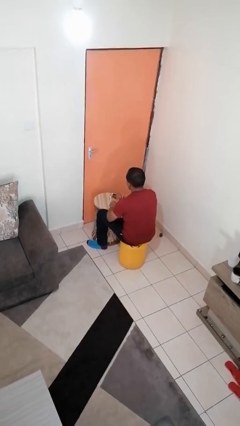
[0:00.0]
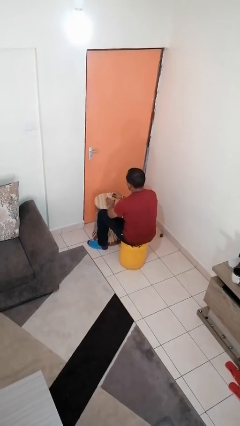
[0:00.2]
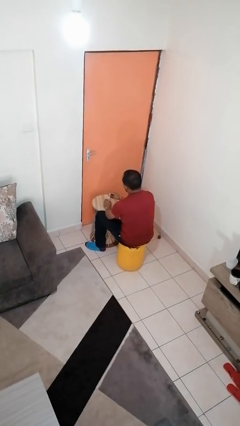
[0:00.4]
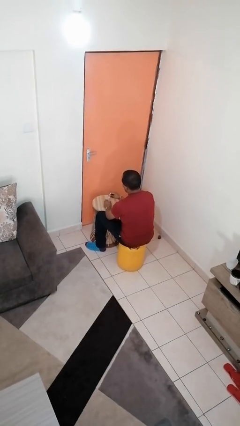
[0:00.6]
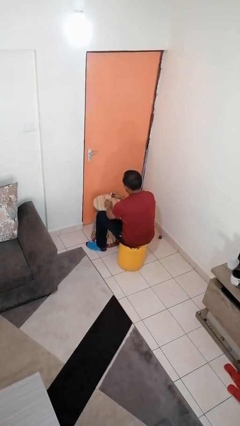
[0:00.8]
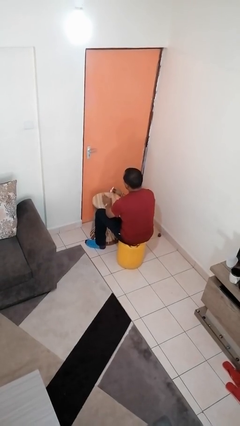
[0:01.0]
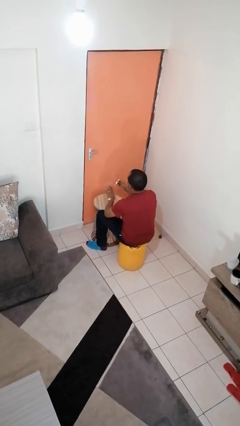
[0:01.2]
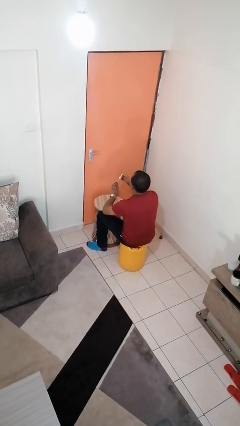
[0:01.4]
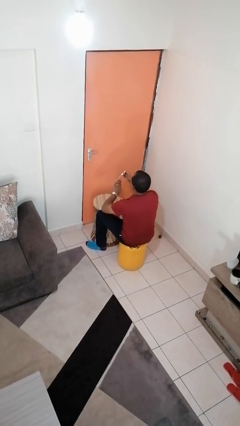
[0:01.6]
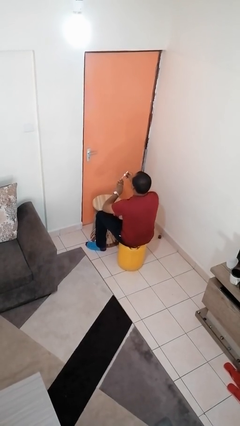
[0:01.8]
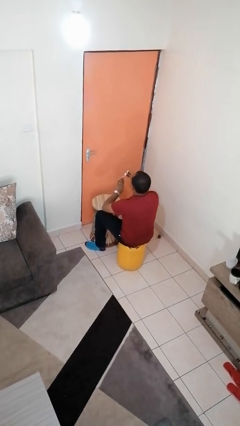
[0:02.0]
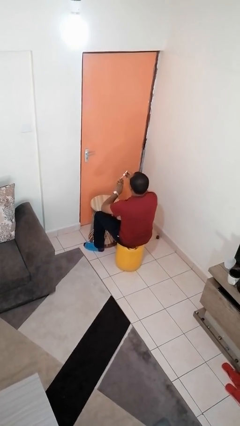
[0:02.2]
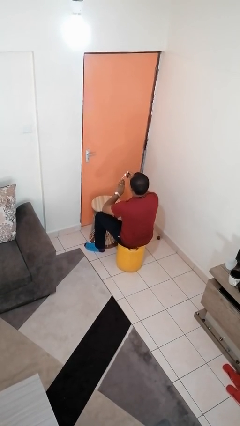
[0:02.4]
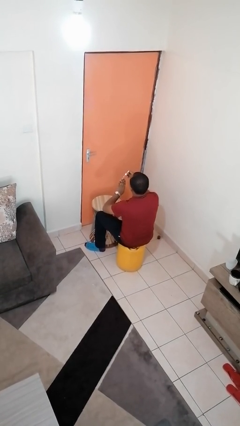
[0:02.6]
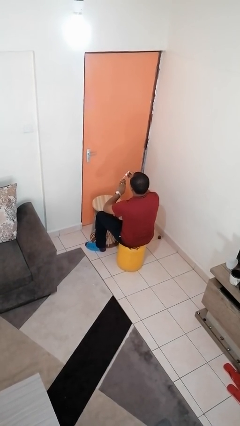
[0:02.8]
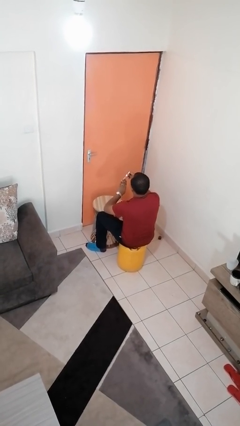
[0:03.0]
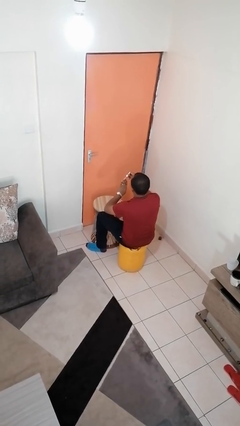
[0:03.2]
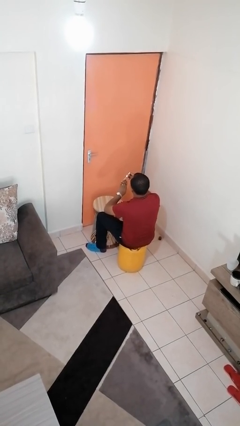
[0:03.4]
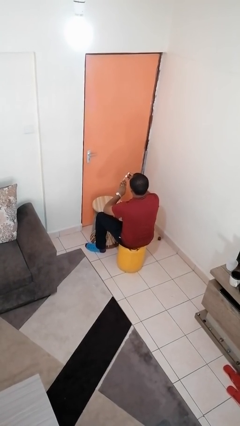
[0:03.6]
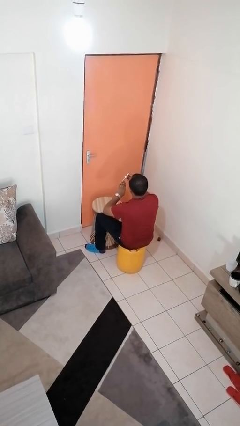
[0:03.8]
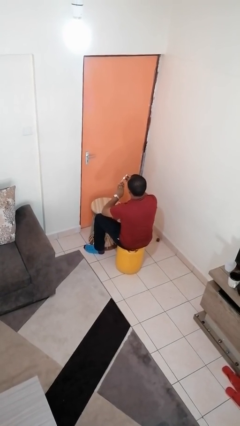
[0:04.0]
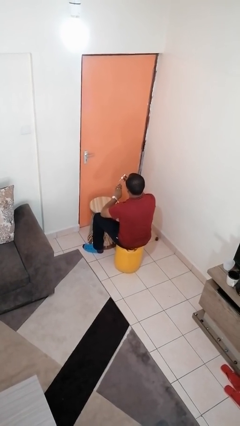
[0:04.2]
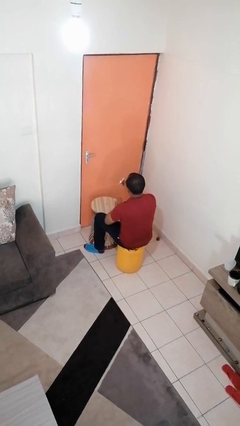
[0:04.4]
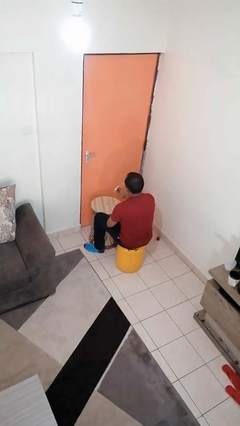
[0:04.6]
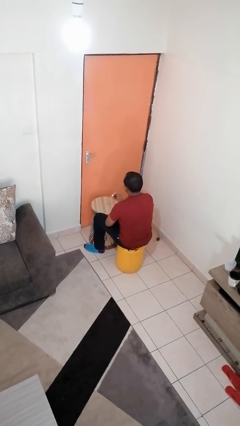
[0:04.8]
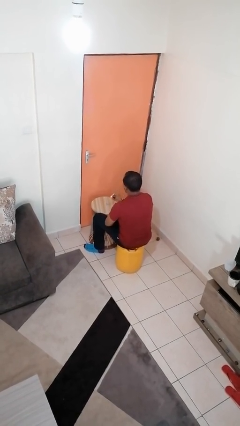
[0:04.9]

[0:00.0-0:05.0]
person paints fingernails

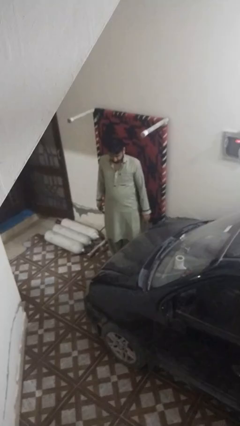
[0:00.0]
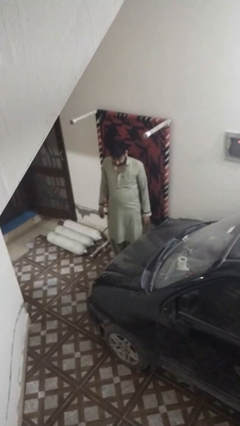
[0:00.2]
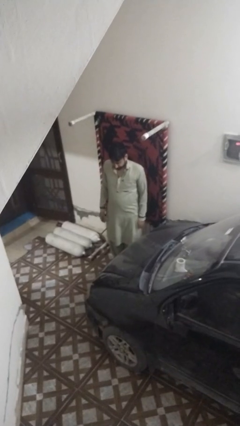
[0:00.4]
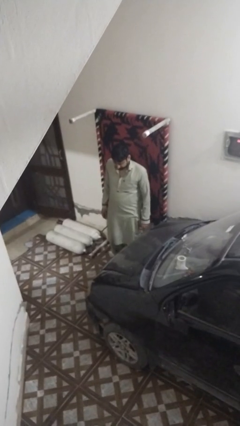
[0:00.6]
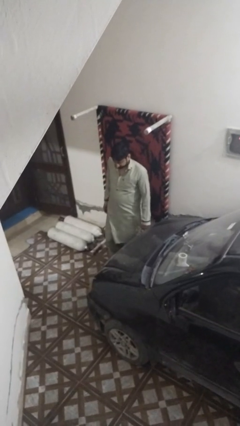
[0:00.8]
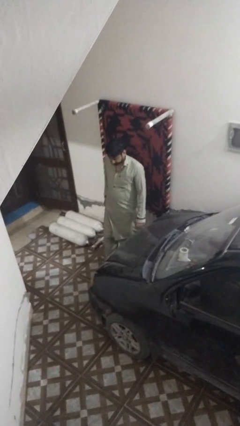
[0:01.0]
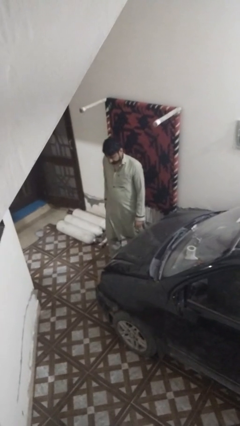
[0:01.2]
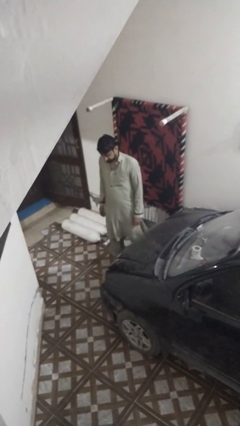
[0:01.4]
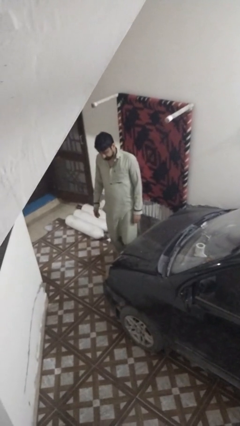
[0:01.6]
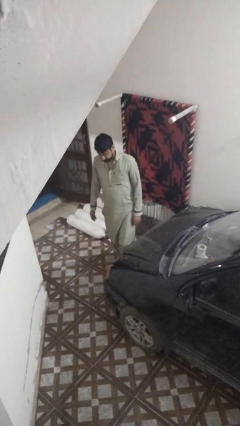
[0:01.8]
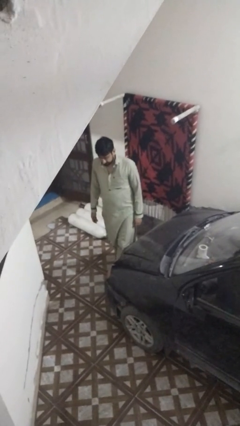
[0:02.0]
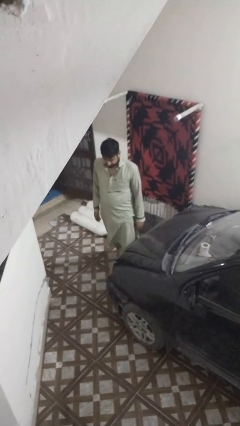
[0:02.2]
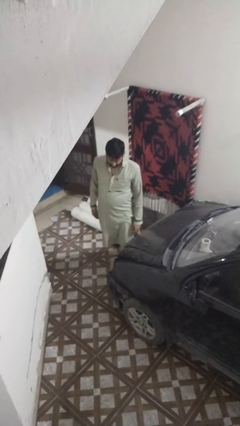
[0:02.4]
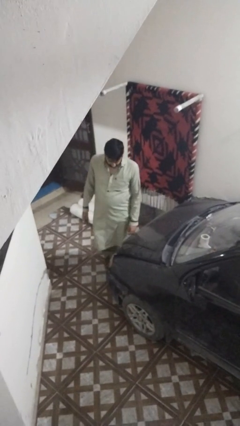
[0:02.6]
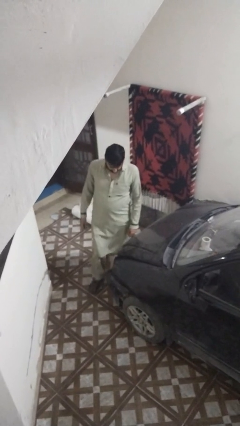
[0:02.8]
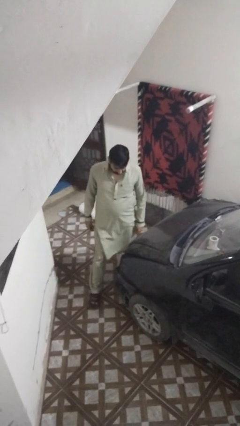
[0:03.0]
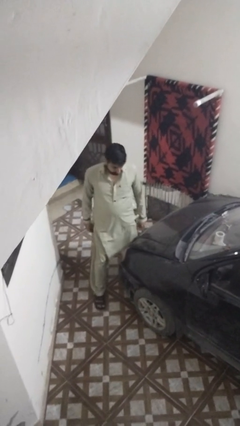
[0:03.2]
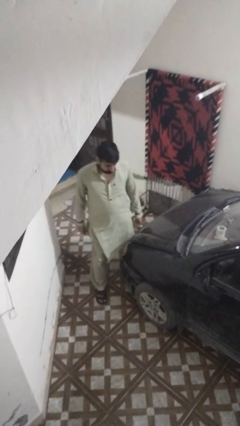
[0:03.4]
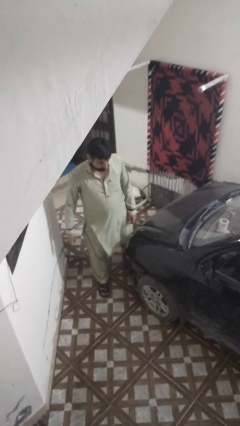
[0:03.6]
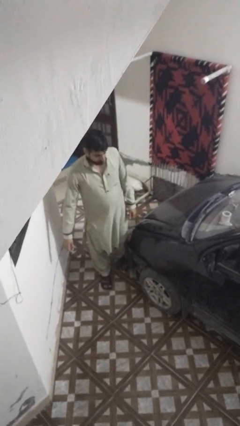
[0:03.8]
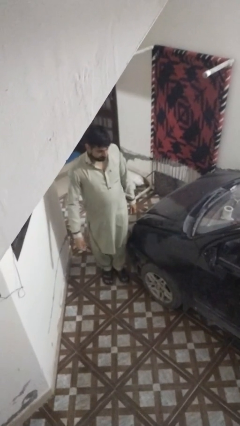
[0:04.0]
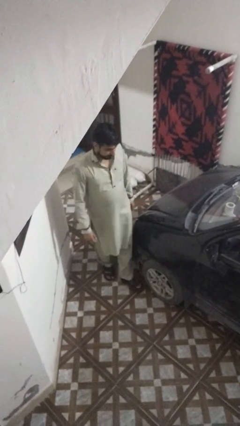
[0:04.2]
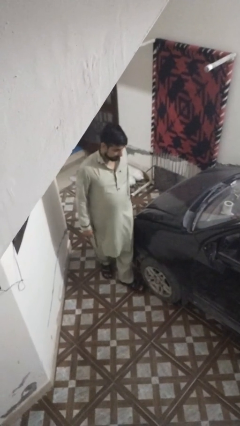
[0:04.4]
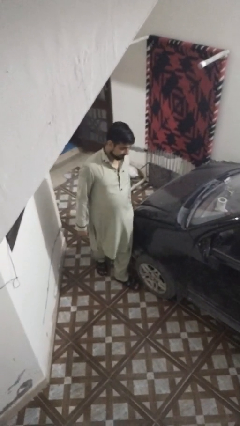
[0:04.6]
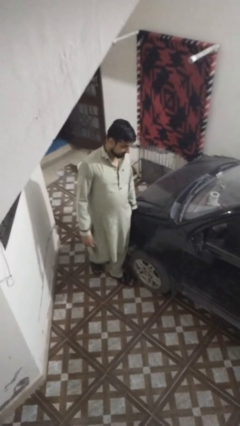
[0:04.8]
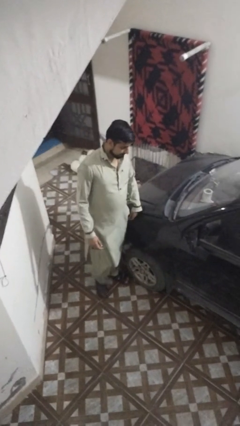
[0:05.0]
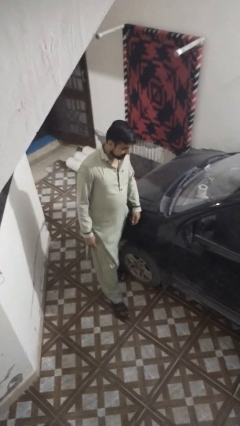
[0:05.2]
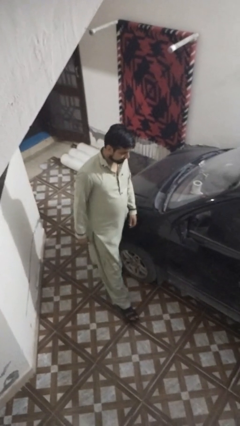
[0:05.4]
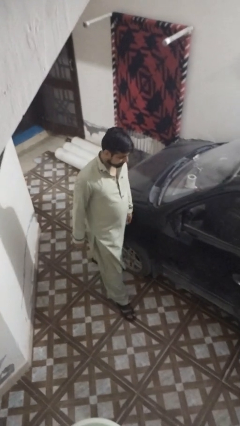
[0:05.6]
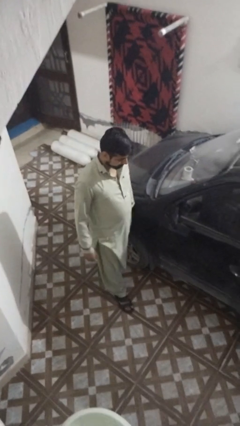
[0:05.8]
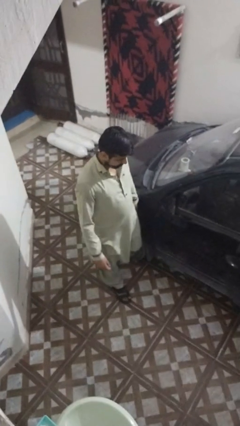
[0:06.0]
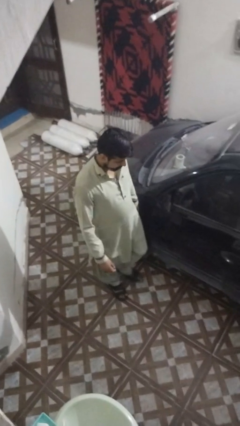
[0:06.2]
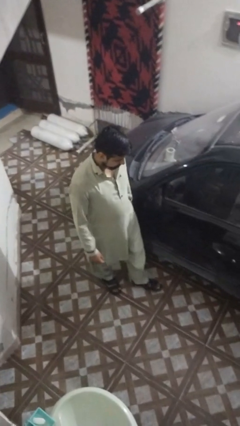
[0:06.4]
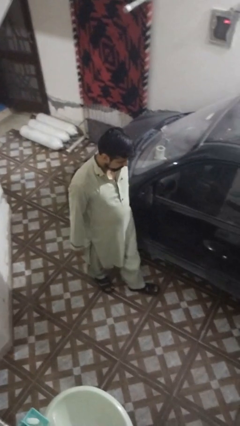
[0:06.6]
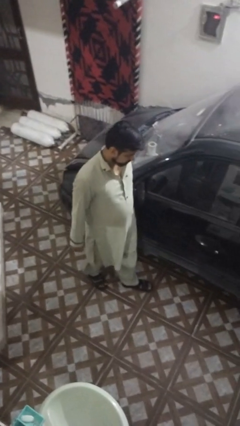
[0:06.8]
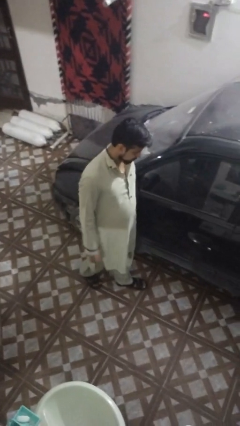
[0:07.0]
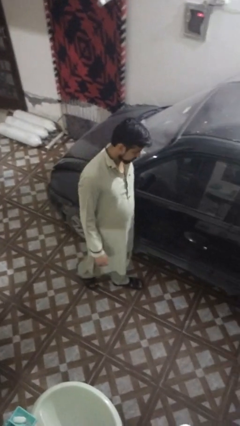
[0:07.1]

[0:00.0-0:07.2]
person walks around car

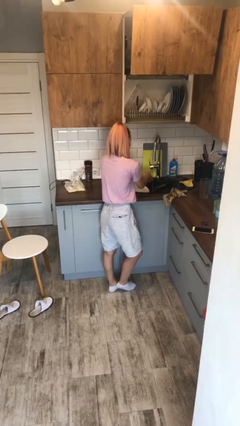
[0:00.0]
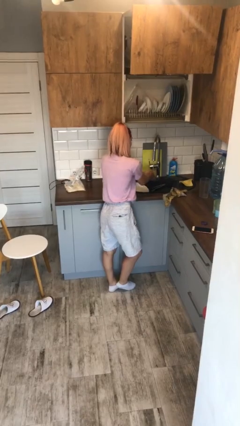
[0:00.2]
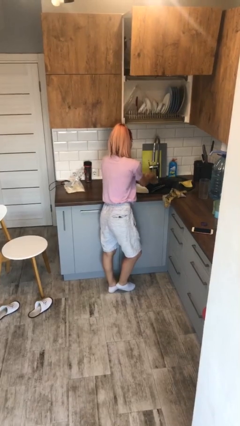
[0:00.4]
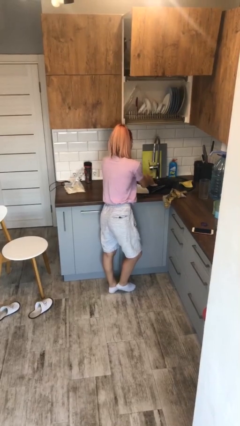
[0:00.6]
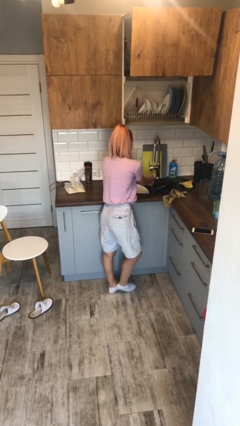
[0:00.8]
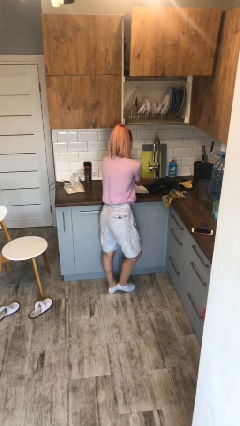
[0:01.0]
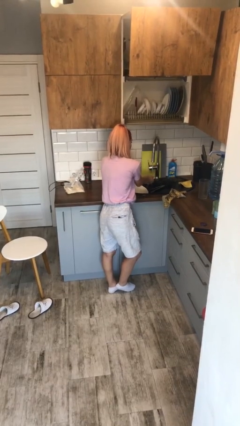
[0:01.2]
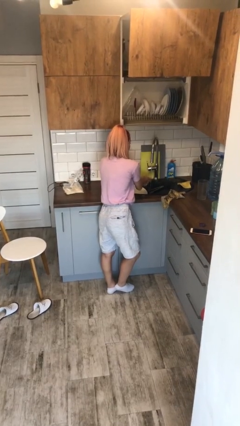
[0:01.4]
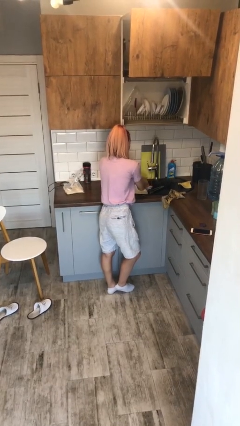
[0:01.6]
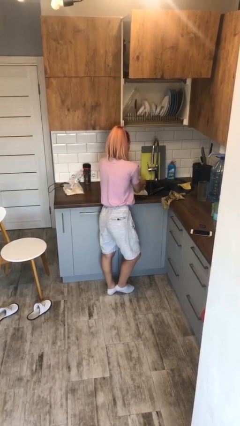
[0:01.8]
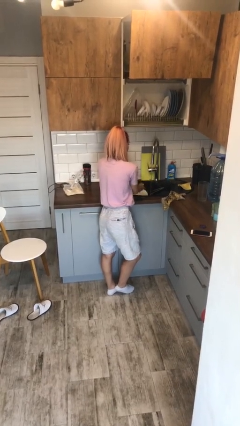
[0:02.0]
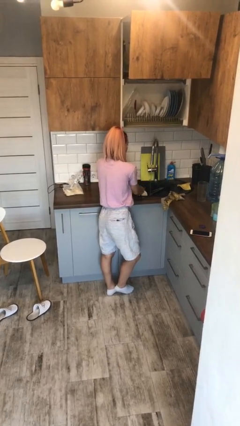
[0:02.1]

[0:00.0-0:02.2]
person washes hands

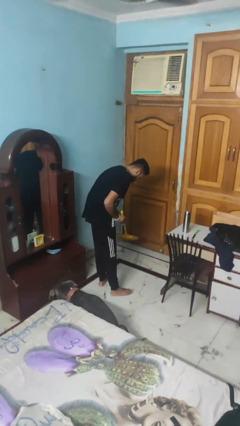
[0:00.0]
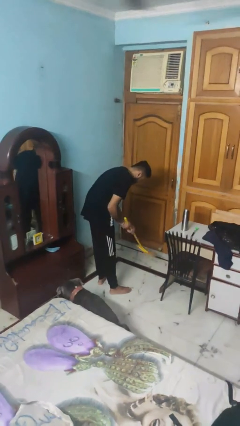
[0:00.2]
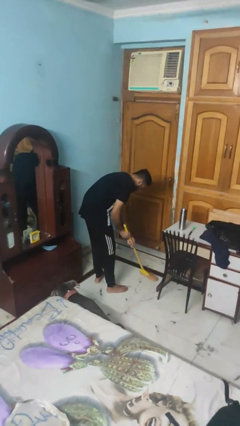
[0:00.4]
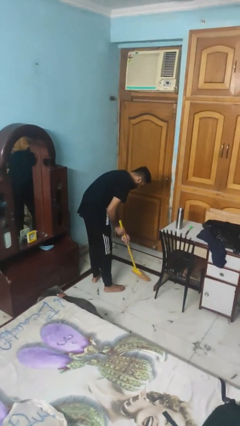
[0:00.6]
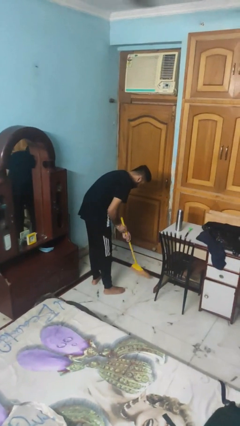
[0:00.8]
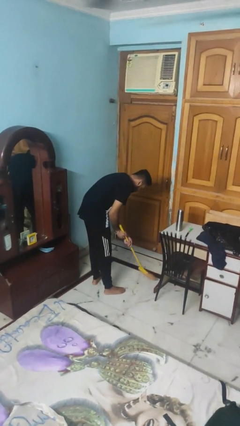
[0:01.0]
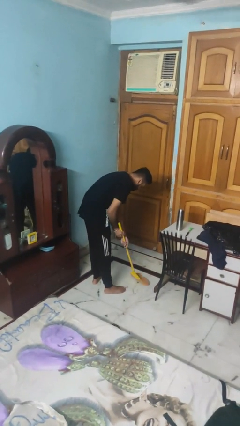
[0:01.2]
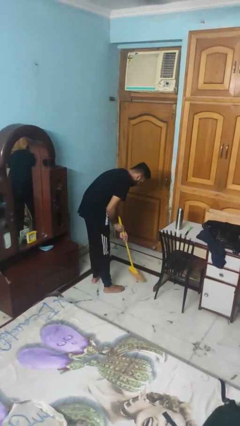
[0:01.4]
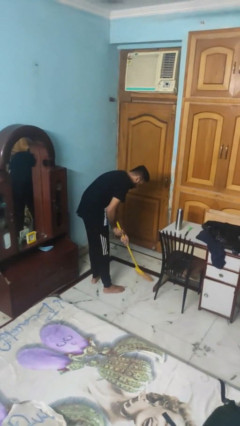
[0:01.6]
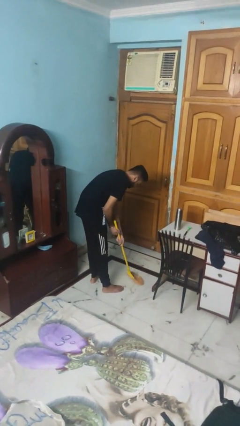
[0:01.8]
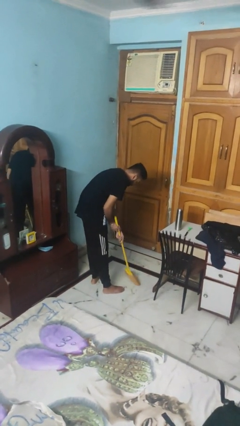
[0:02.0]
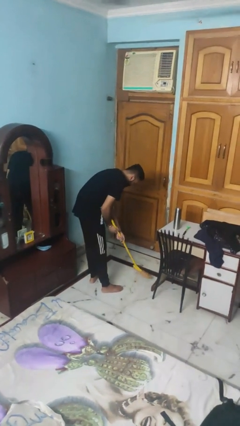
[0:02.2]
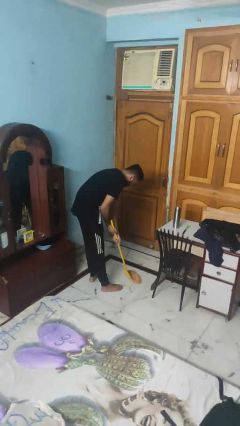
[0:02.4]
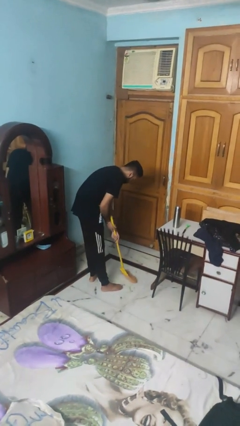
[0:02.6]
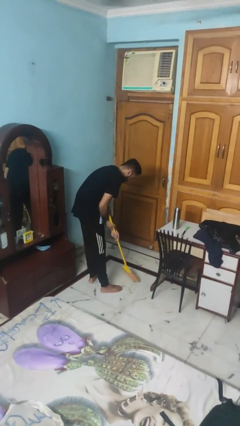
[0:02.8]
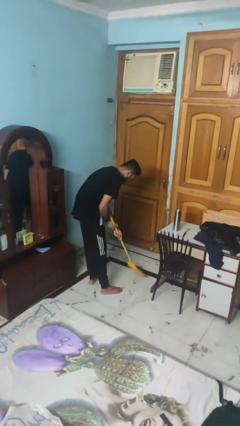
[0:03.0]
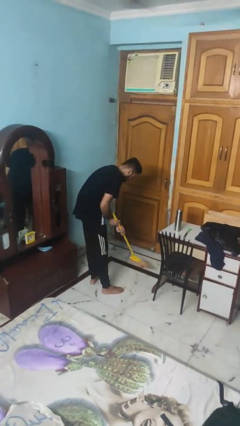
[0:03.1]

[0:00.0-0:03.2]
person sweeps floor
